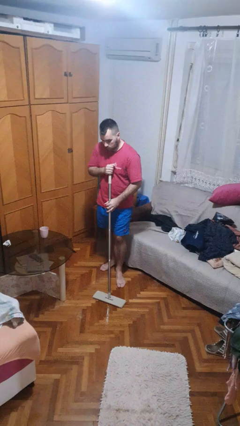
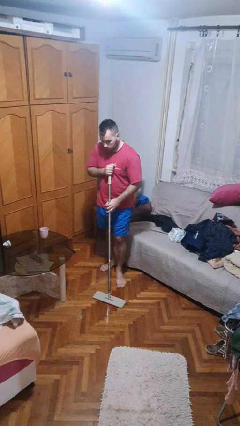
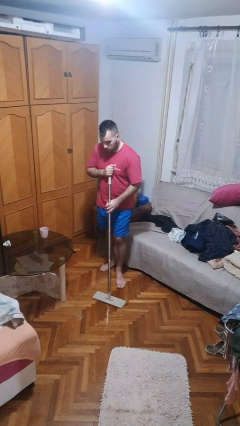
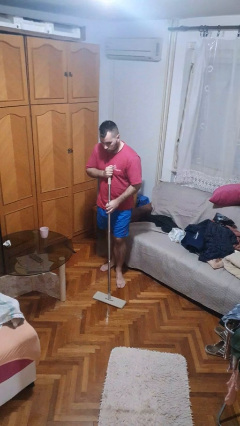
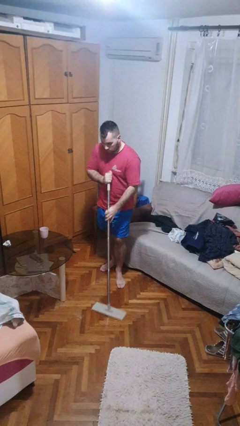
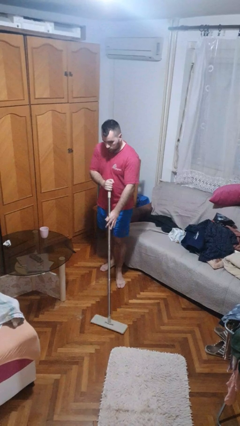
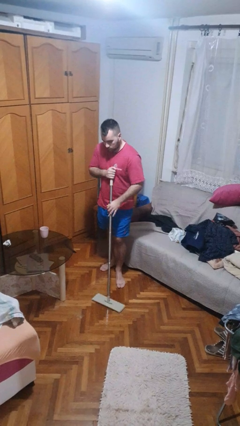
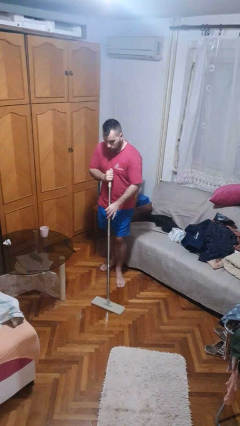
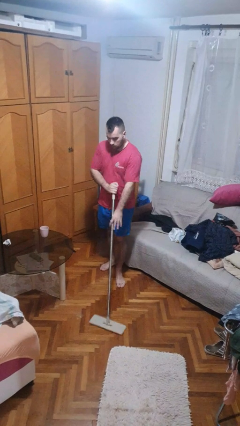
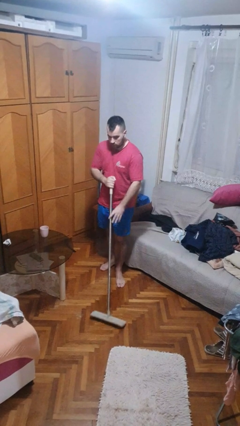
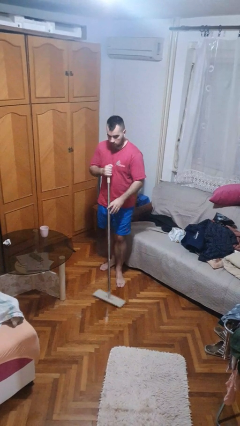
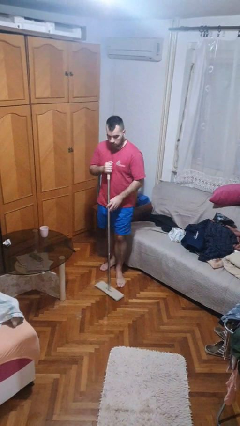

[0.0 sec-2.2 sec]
person mops

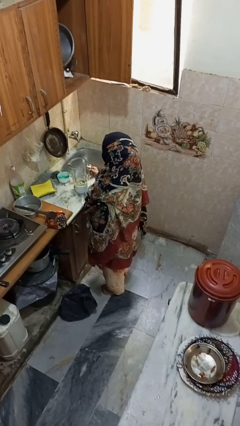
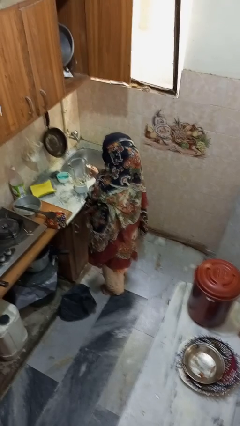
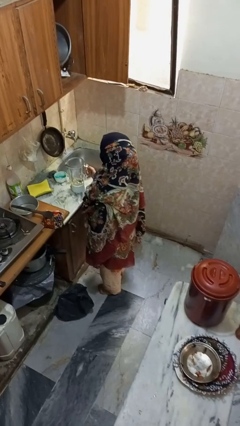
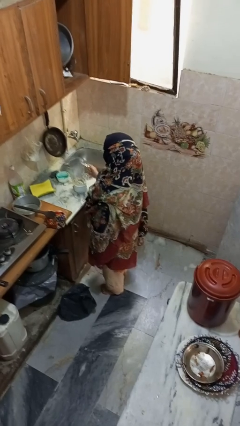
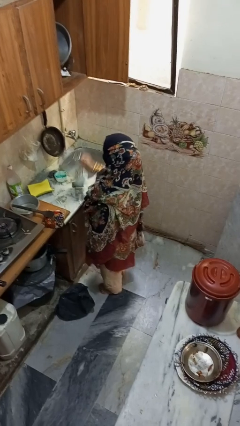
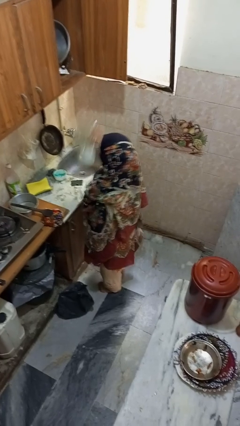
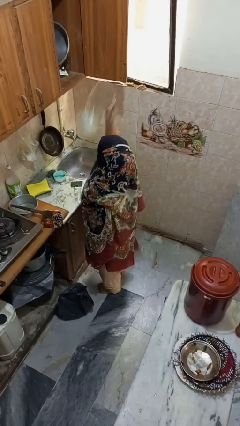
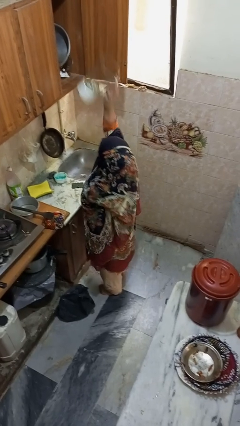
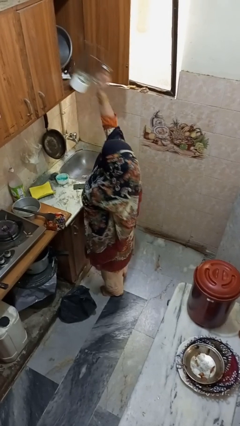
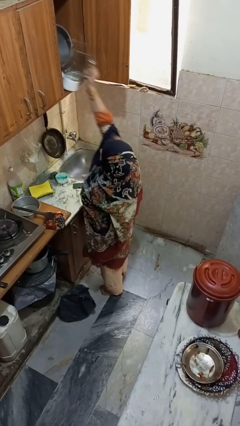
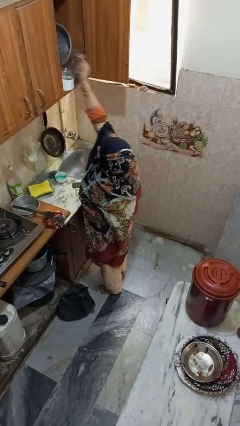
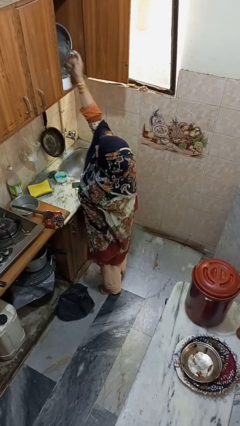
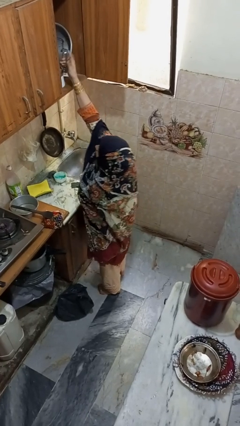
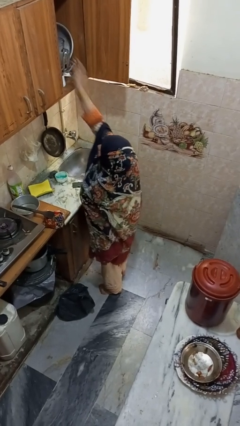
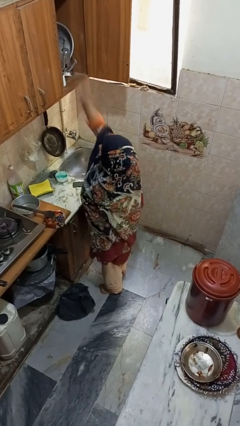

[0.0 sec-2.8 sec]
person takes object from cabinet

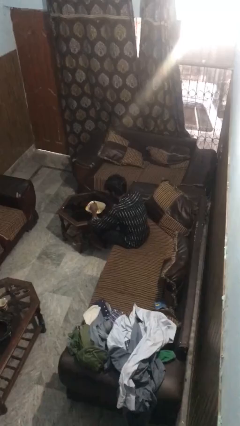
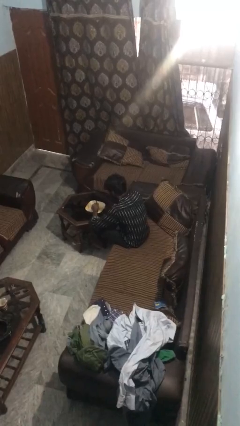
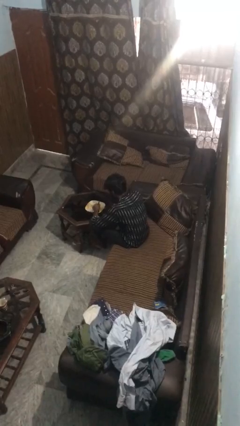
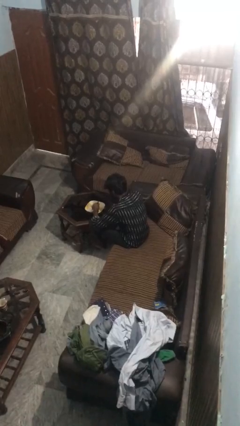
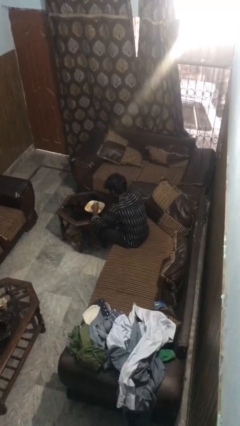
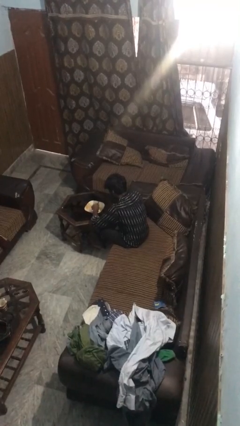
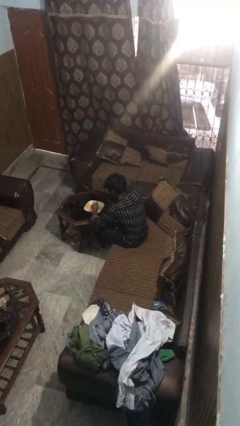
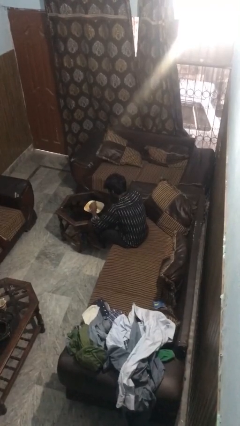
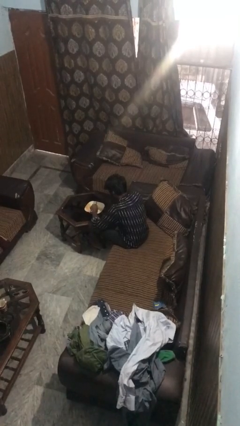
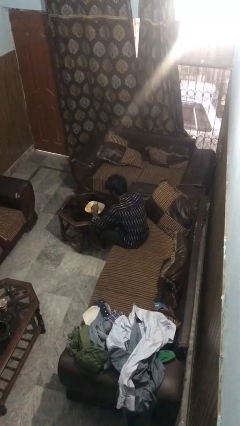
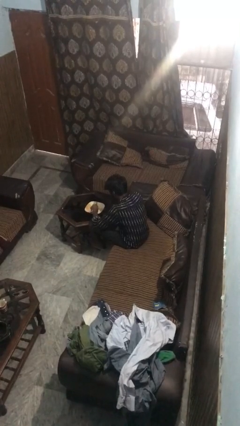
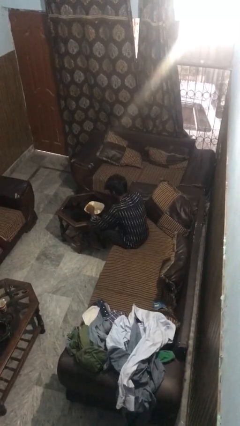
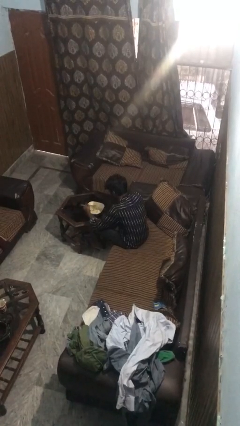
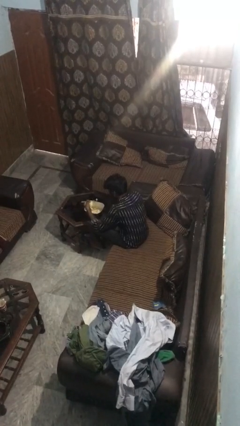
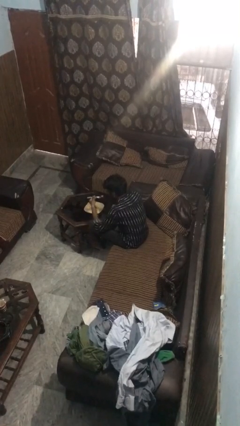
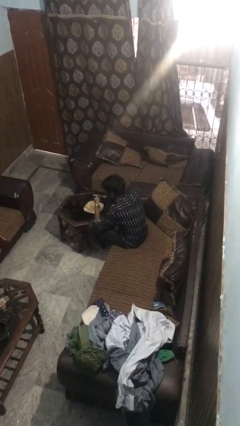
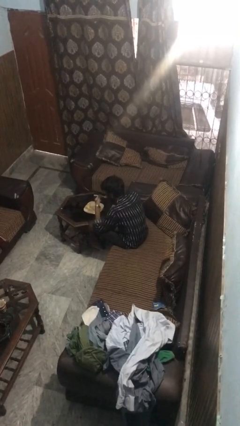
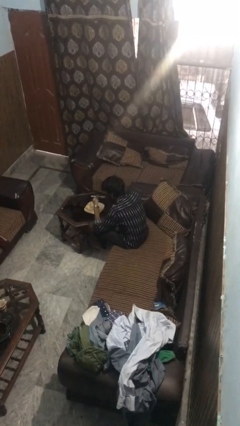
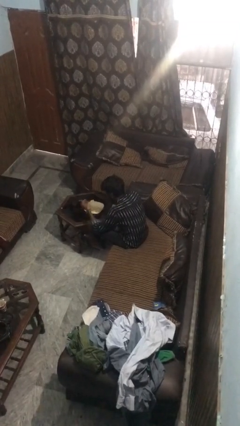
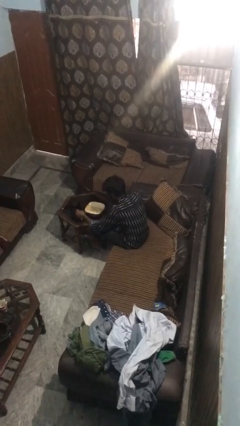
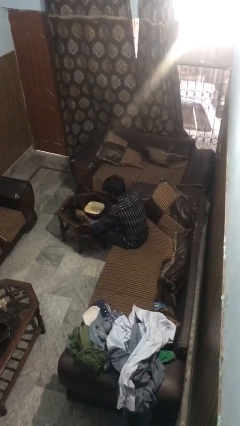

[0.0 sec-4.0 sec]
person eats with utensil

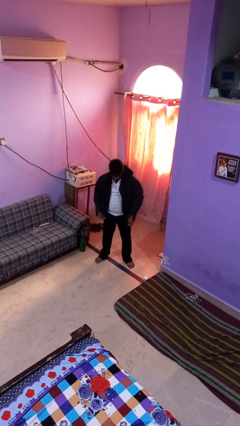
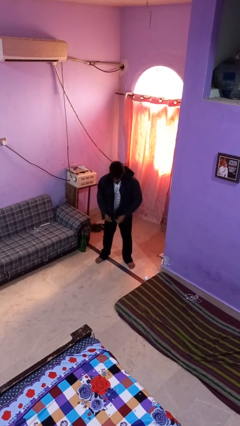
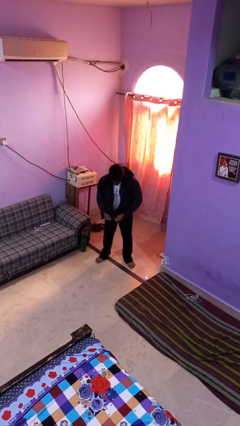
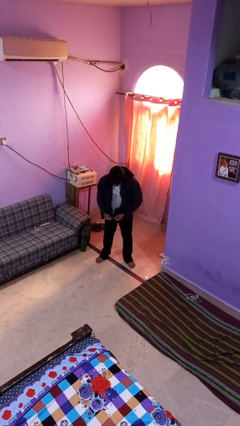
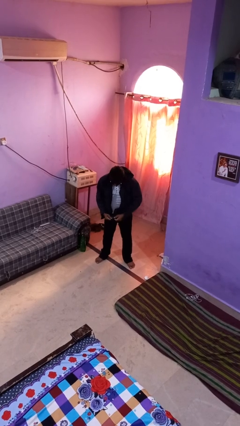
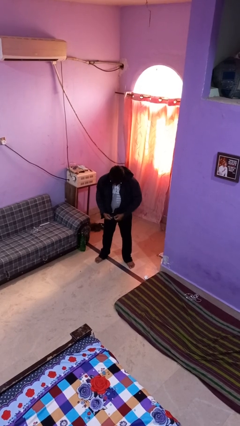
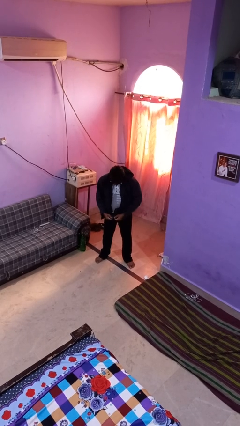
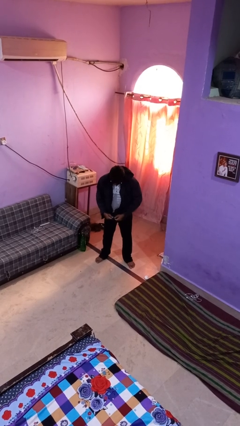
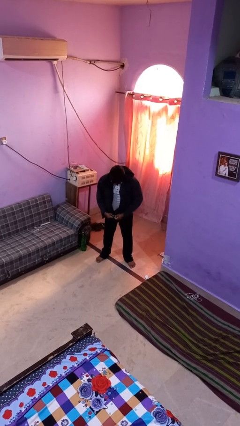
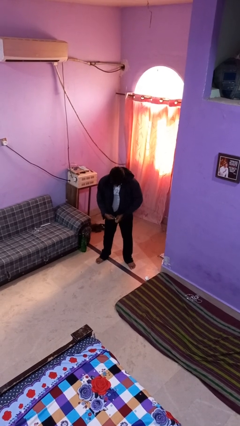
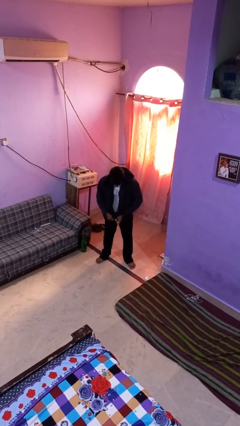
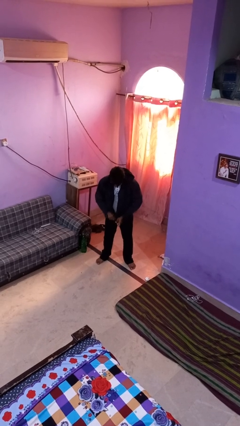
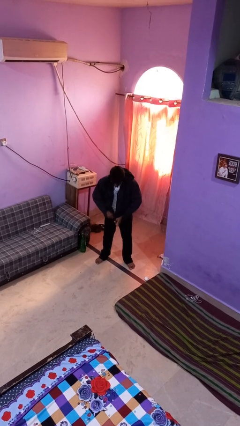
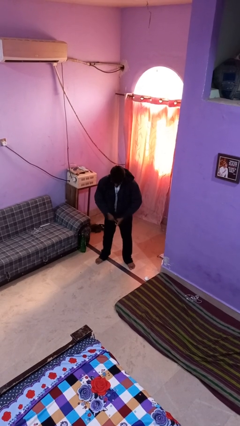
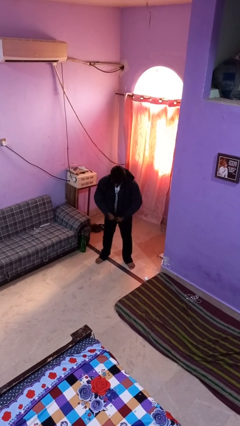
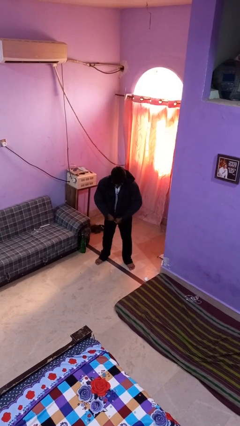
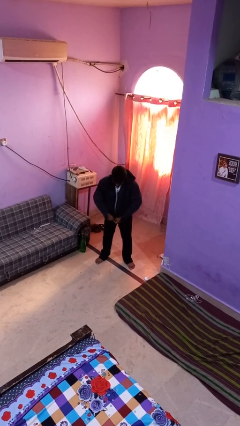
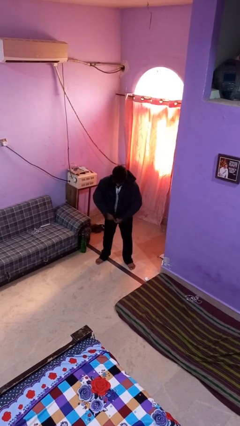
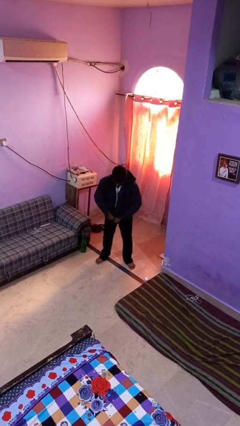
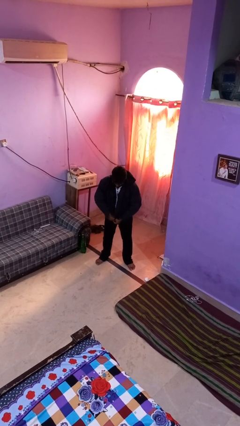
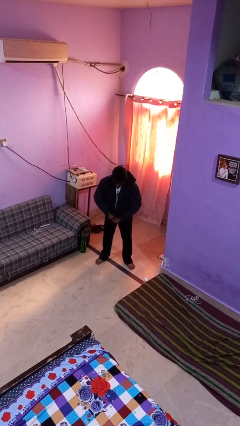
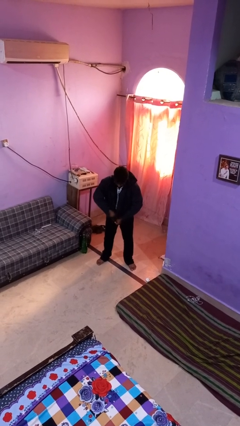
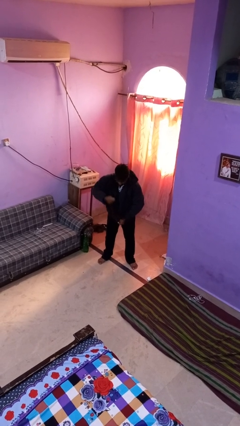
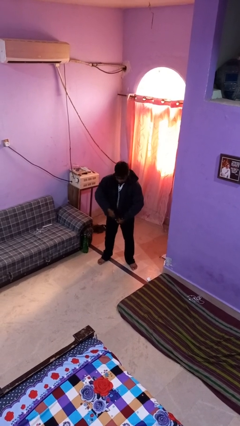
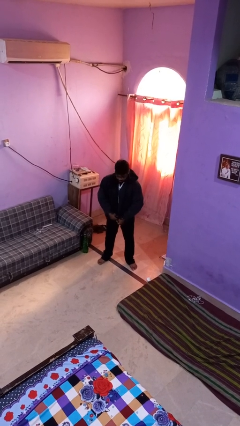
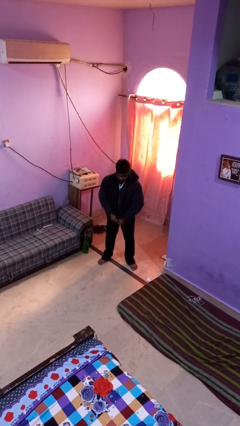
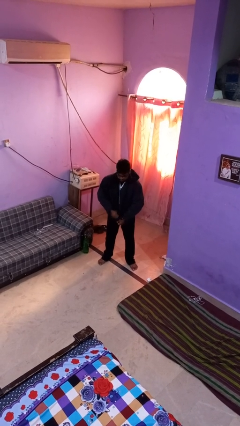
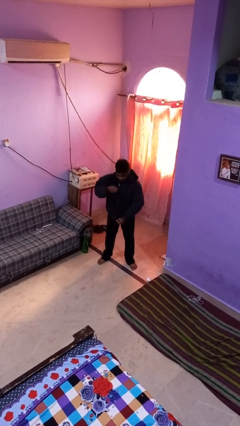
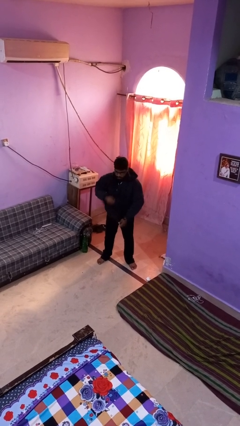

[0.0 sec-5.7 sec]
person zips up jacket

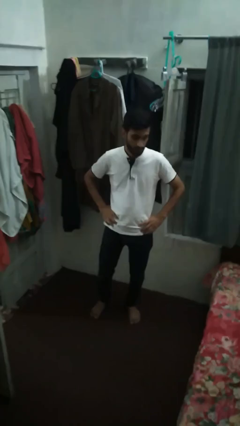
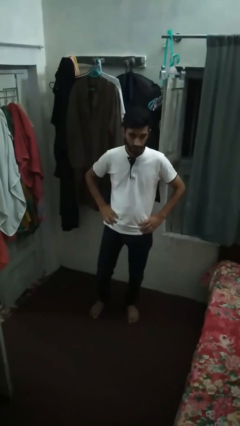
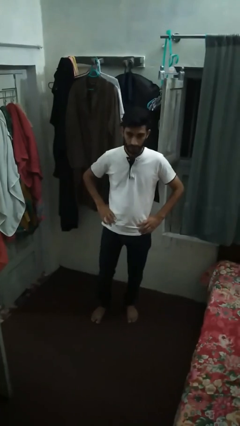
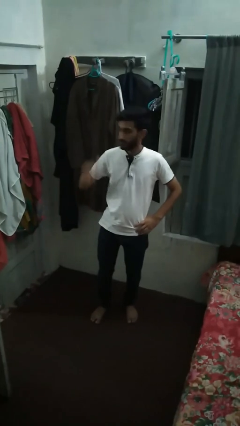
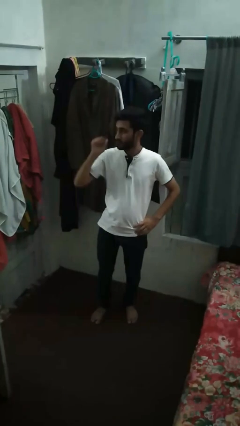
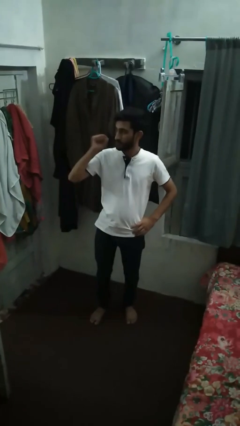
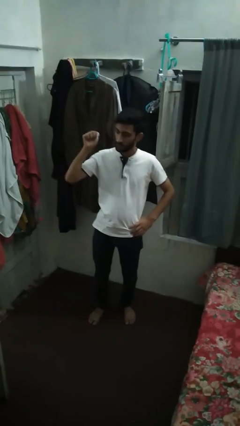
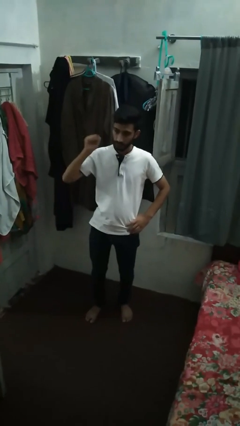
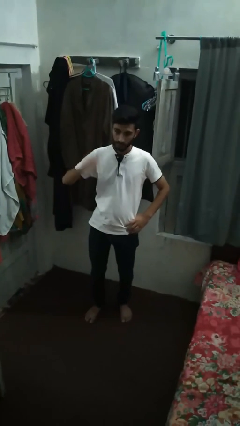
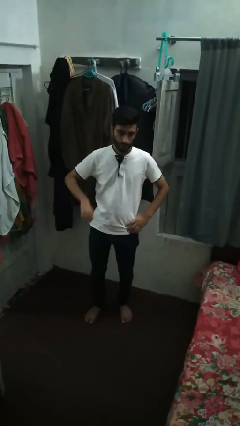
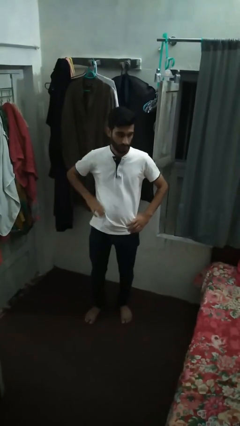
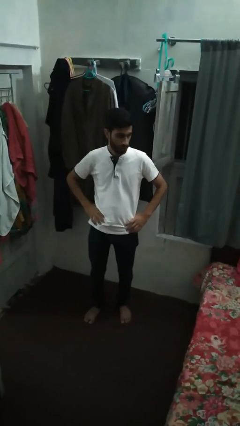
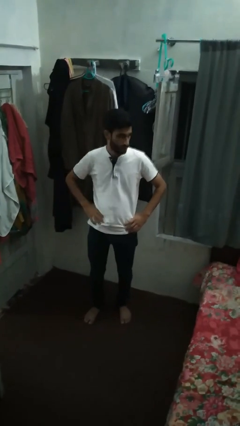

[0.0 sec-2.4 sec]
person gestures behind me
